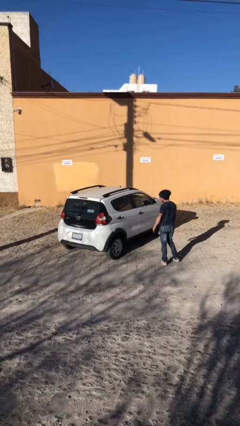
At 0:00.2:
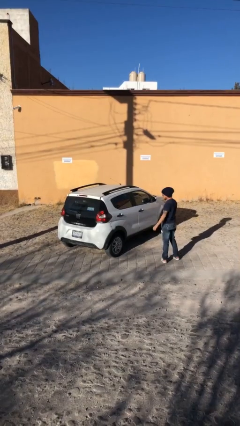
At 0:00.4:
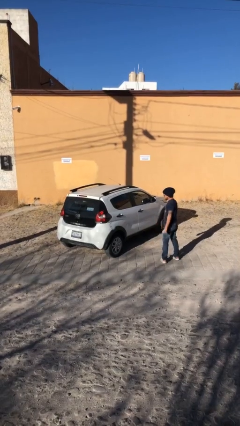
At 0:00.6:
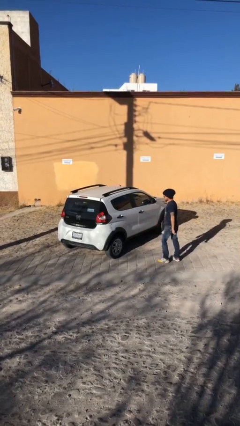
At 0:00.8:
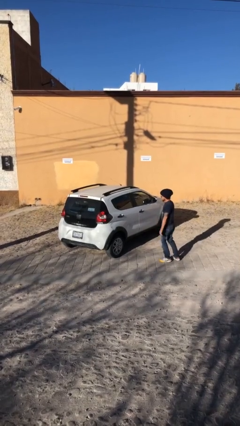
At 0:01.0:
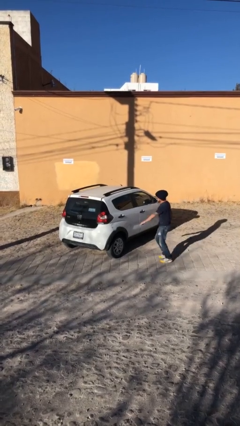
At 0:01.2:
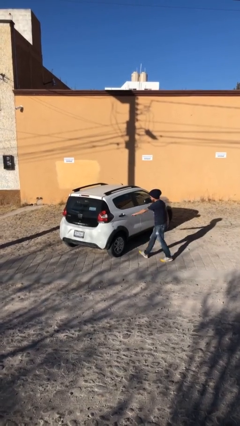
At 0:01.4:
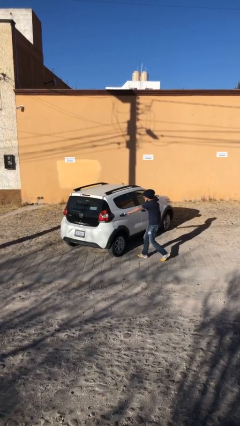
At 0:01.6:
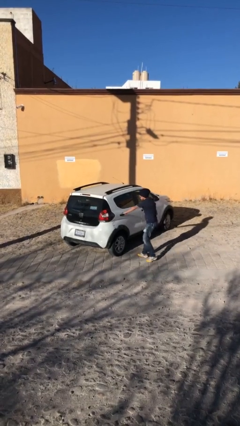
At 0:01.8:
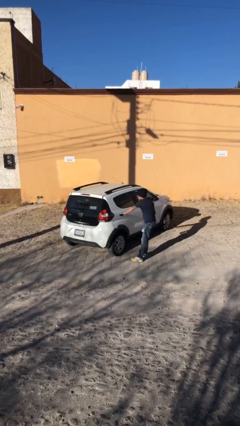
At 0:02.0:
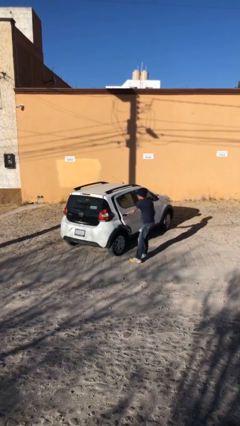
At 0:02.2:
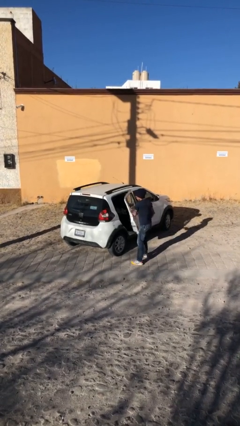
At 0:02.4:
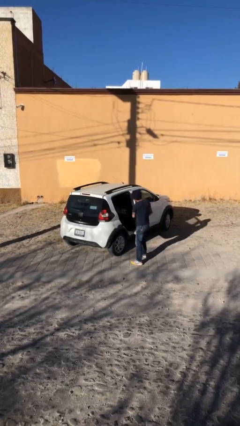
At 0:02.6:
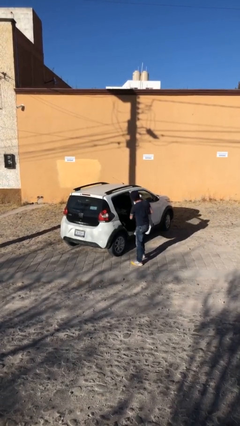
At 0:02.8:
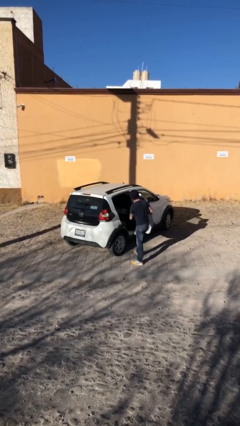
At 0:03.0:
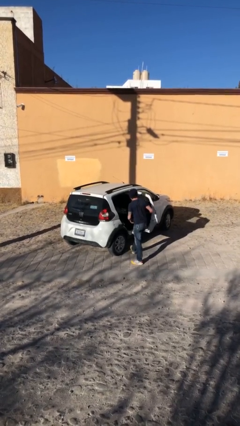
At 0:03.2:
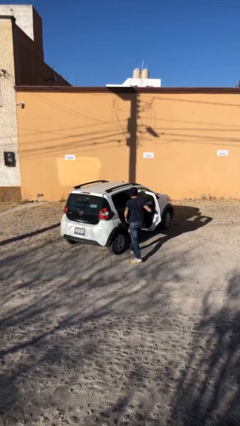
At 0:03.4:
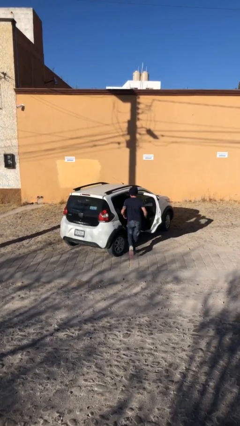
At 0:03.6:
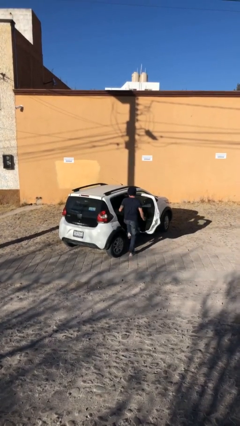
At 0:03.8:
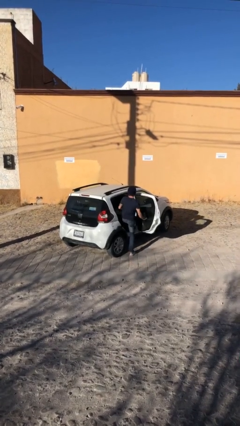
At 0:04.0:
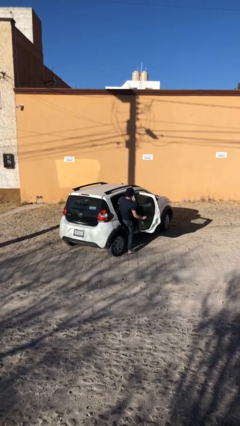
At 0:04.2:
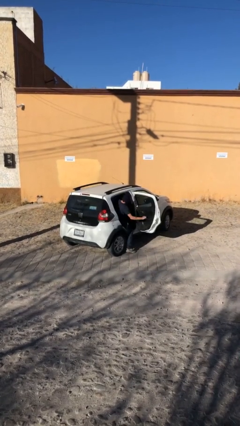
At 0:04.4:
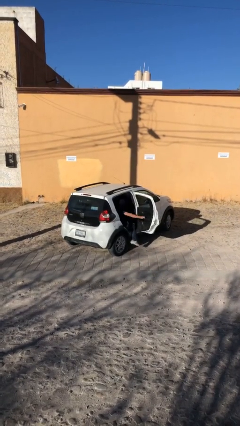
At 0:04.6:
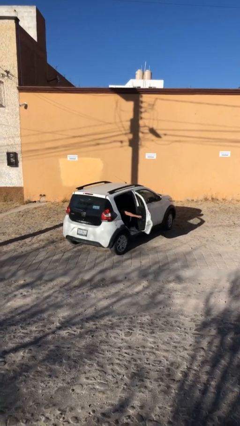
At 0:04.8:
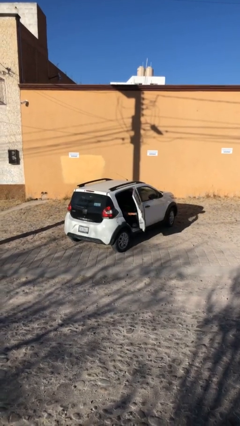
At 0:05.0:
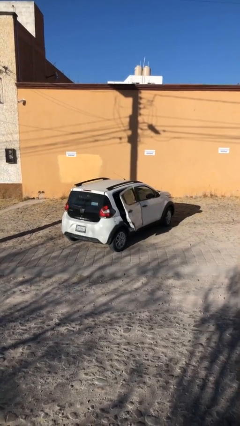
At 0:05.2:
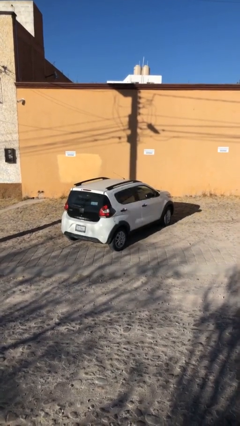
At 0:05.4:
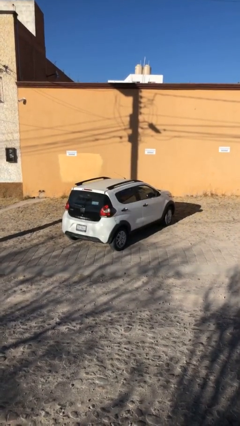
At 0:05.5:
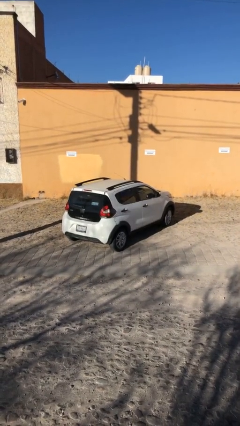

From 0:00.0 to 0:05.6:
car picks up person

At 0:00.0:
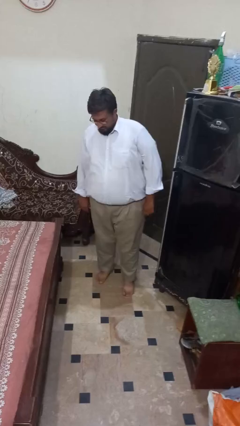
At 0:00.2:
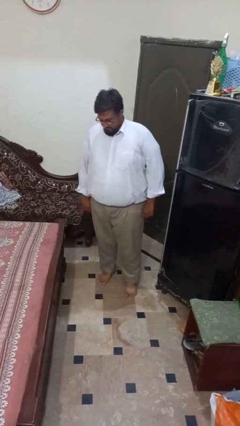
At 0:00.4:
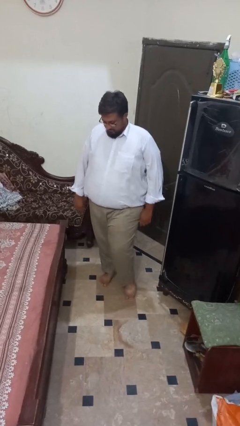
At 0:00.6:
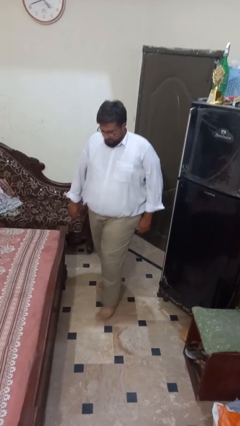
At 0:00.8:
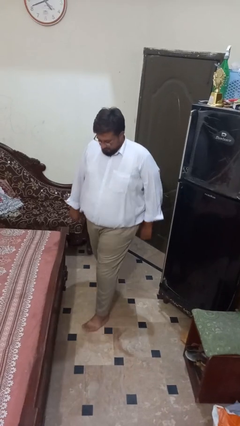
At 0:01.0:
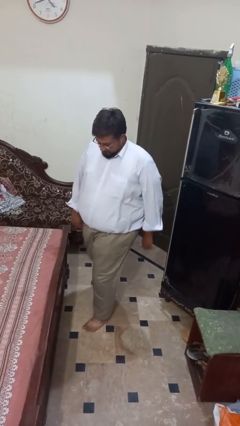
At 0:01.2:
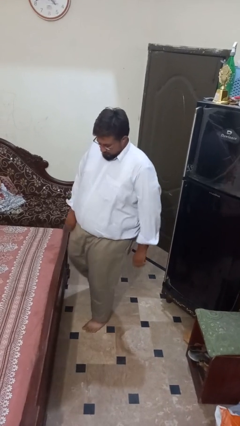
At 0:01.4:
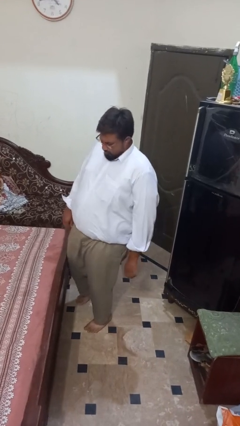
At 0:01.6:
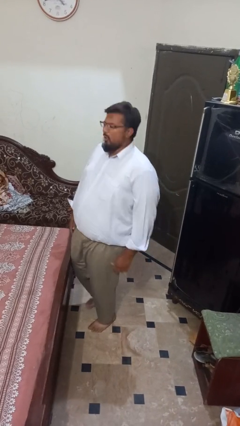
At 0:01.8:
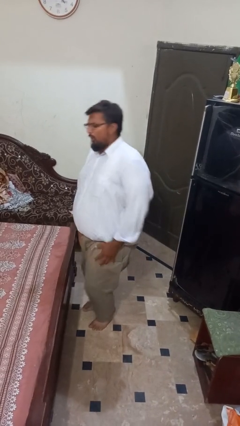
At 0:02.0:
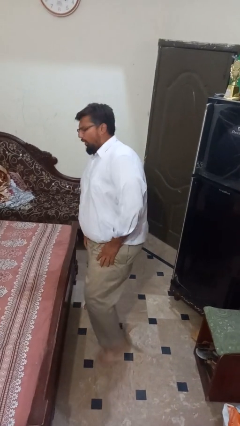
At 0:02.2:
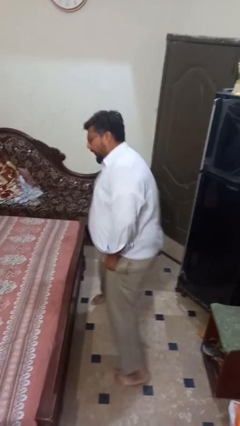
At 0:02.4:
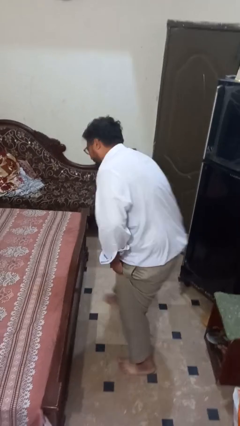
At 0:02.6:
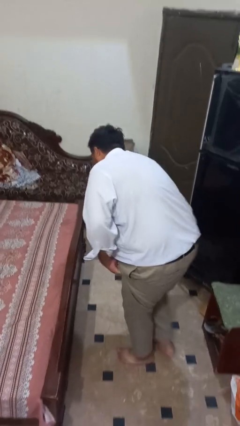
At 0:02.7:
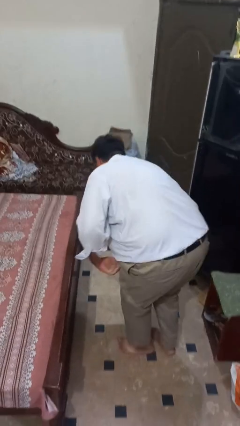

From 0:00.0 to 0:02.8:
person trips on object on floor

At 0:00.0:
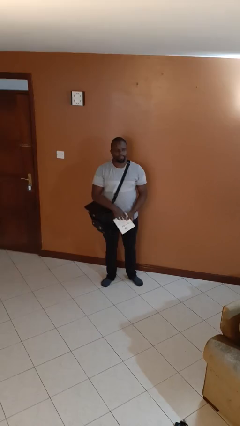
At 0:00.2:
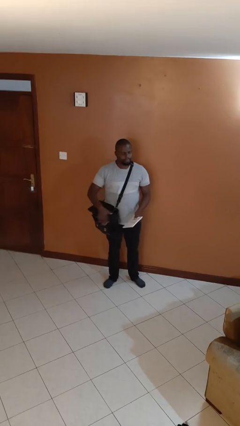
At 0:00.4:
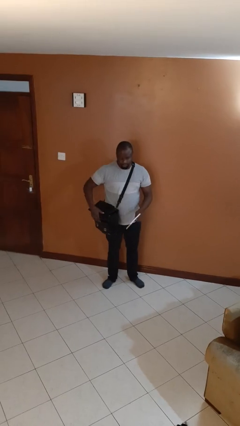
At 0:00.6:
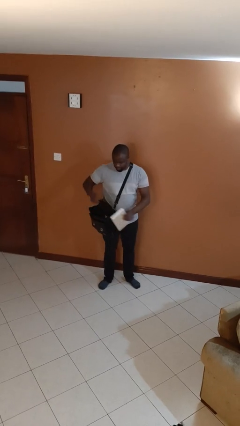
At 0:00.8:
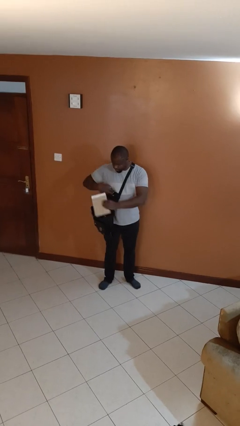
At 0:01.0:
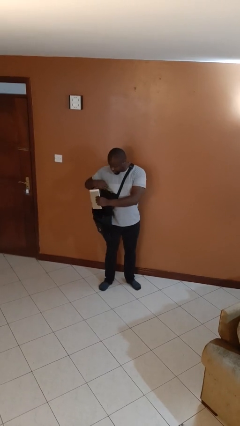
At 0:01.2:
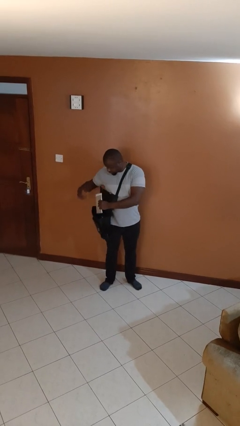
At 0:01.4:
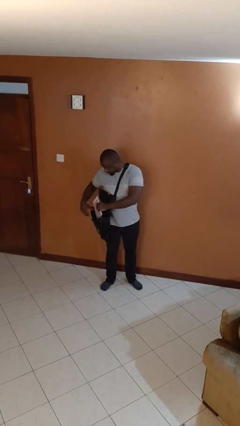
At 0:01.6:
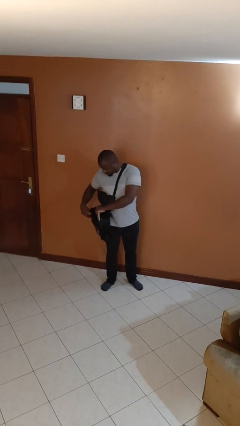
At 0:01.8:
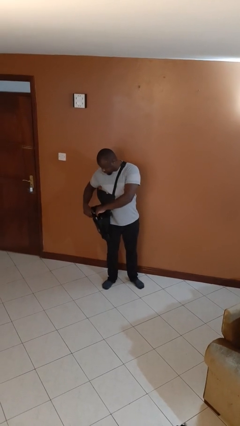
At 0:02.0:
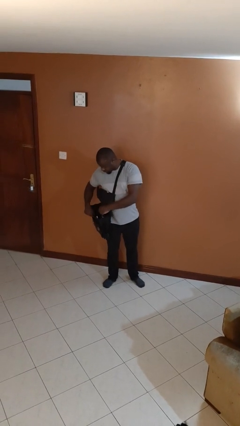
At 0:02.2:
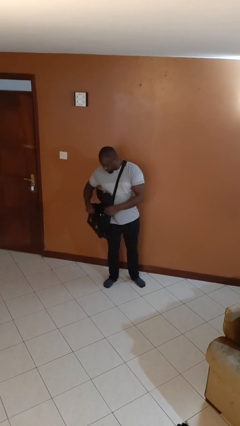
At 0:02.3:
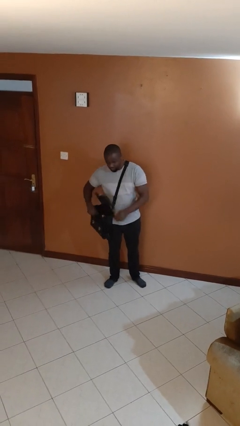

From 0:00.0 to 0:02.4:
person puts object into purse

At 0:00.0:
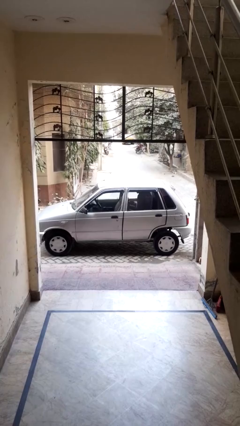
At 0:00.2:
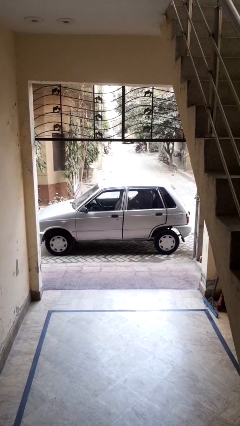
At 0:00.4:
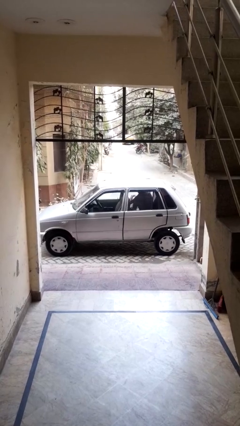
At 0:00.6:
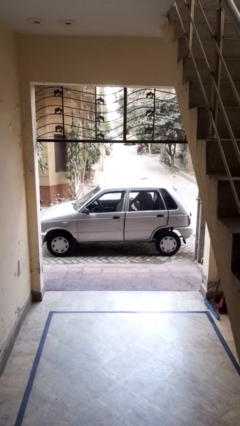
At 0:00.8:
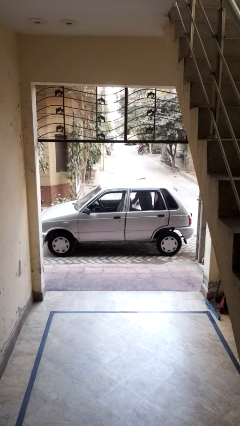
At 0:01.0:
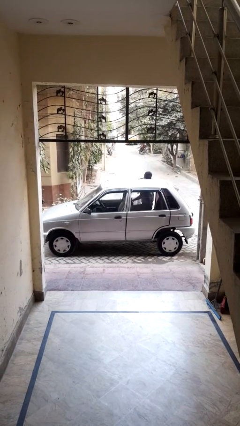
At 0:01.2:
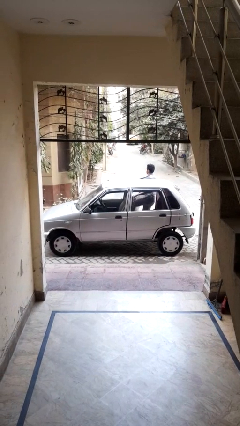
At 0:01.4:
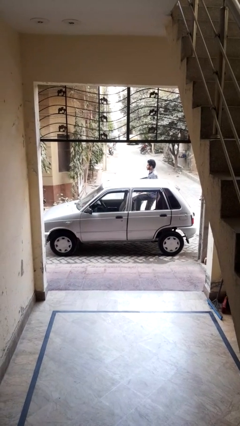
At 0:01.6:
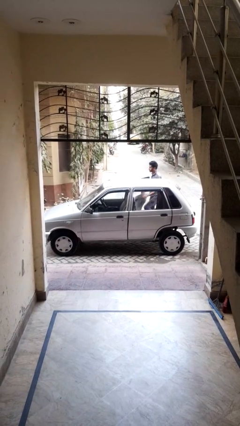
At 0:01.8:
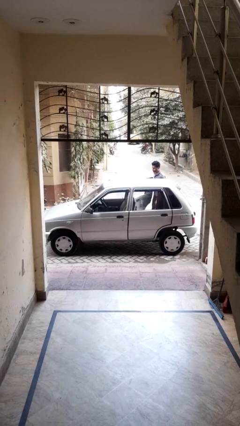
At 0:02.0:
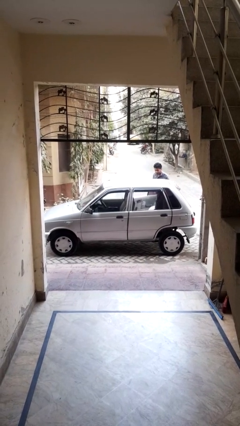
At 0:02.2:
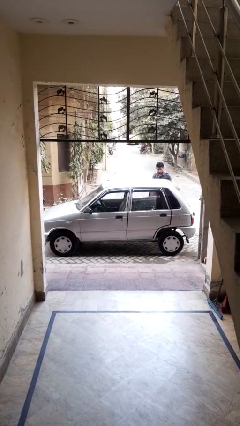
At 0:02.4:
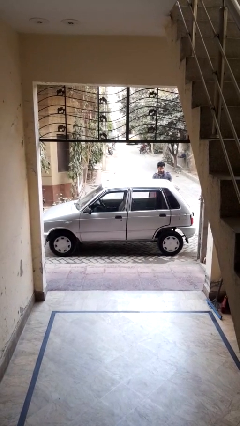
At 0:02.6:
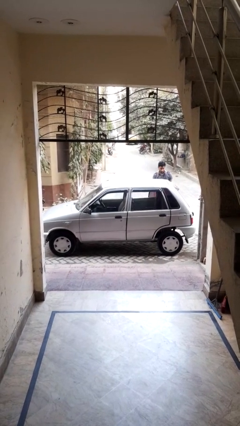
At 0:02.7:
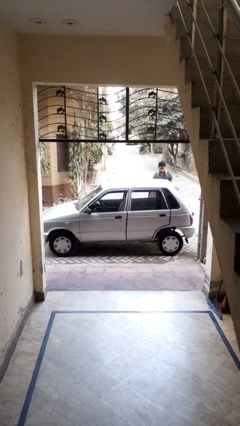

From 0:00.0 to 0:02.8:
car drops off person

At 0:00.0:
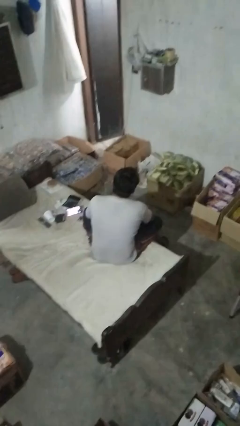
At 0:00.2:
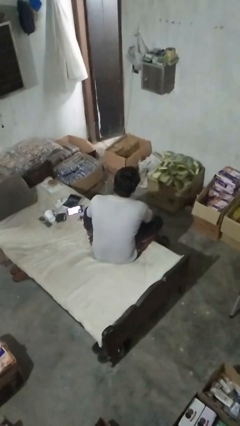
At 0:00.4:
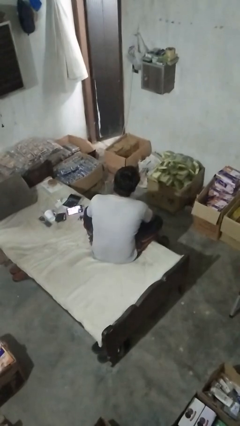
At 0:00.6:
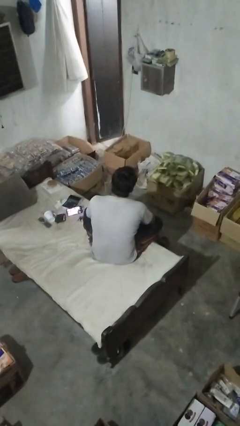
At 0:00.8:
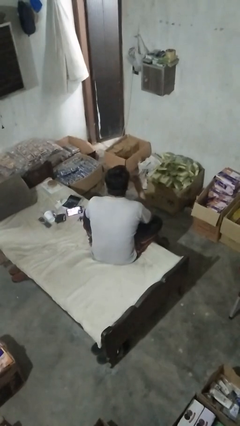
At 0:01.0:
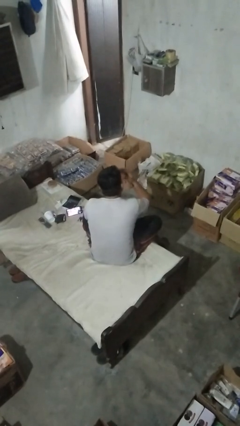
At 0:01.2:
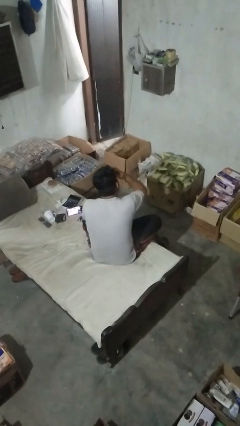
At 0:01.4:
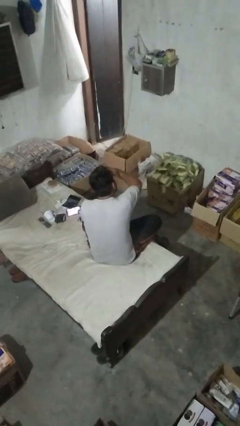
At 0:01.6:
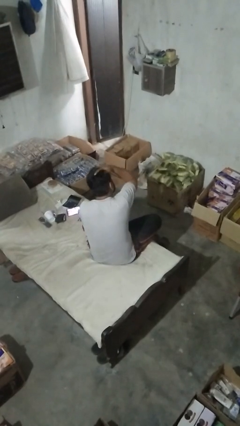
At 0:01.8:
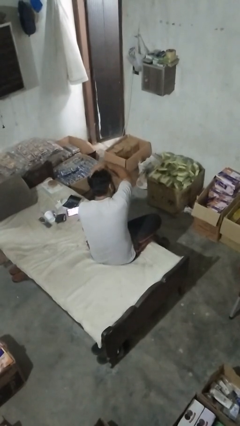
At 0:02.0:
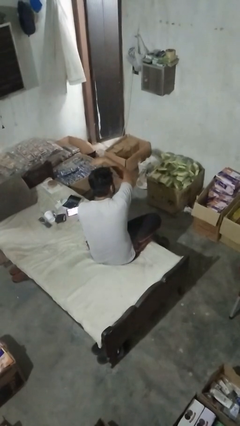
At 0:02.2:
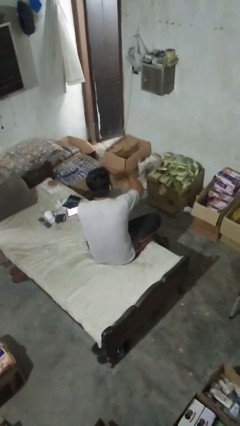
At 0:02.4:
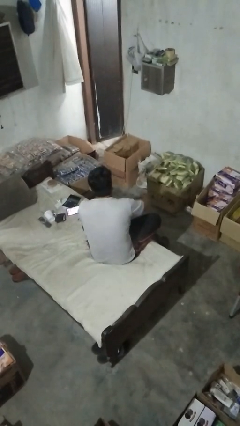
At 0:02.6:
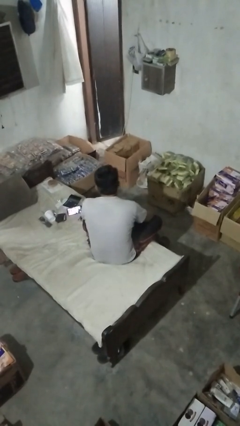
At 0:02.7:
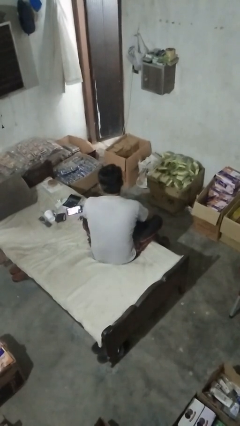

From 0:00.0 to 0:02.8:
person strokes hair

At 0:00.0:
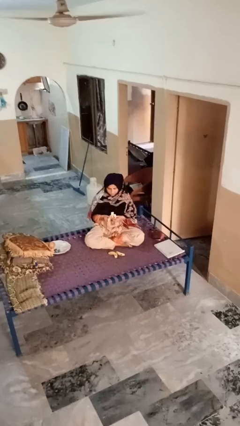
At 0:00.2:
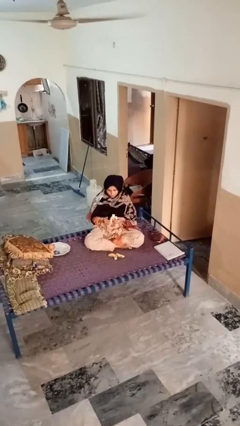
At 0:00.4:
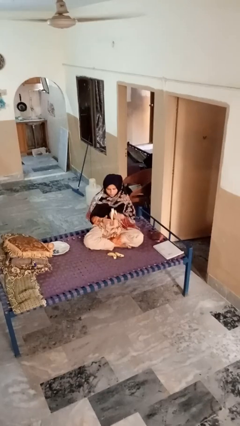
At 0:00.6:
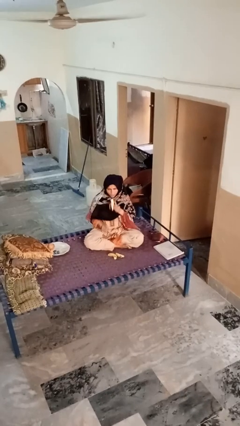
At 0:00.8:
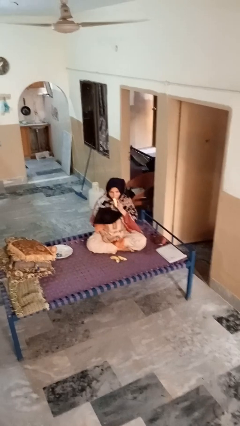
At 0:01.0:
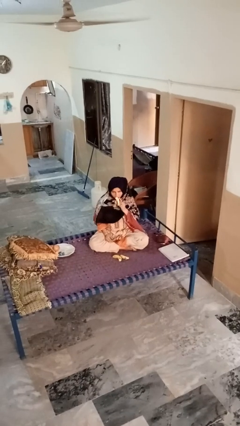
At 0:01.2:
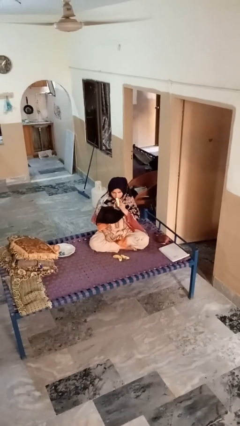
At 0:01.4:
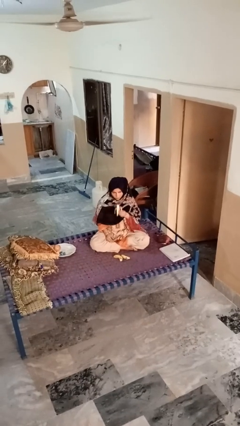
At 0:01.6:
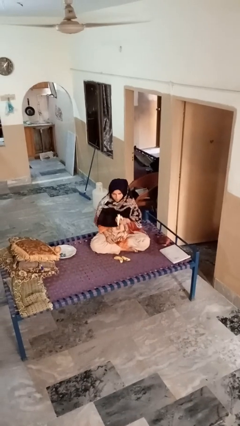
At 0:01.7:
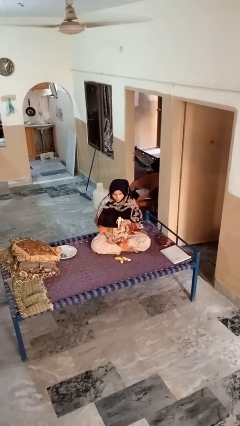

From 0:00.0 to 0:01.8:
person eats banana
